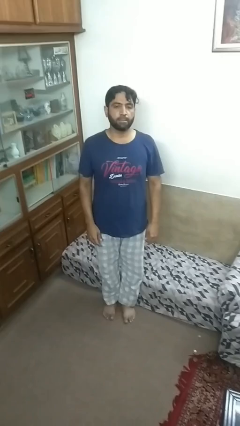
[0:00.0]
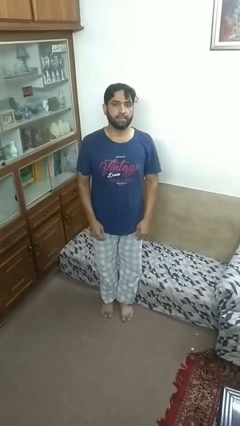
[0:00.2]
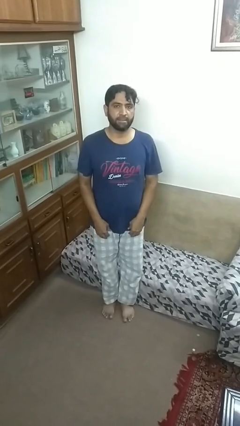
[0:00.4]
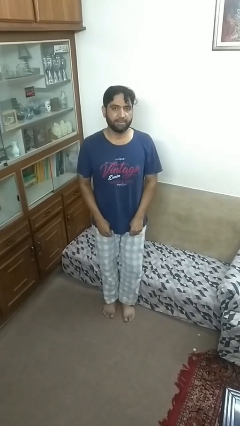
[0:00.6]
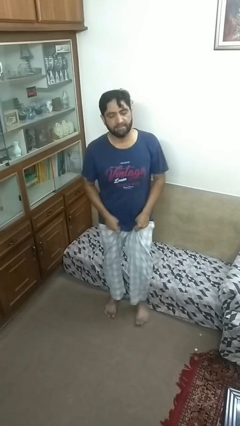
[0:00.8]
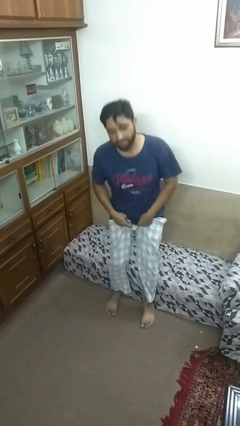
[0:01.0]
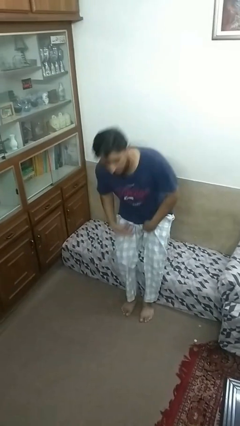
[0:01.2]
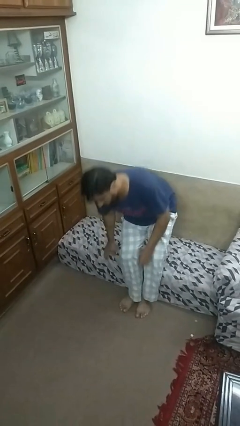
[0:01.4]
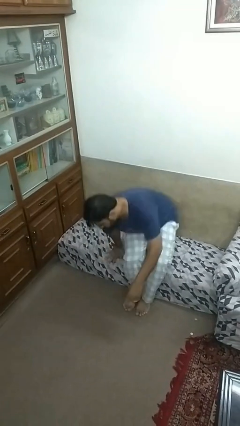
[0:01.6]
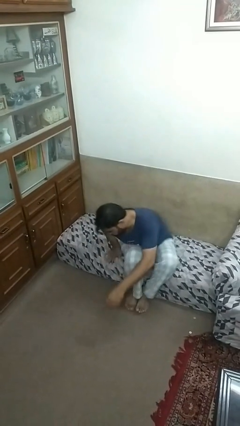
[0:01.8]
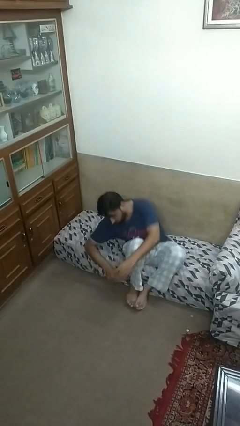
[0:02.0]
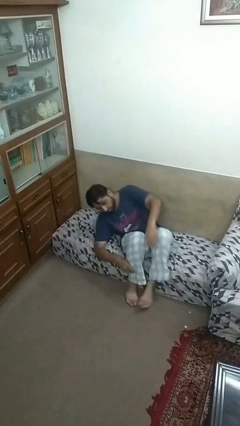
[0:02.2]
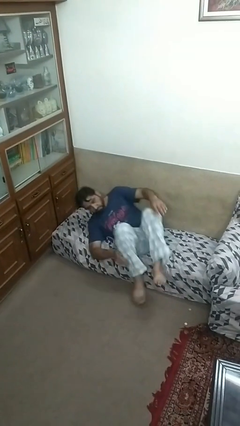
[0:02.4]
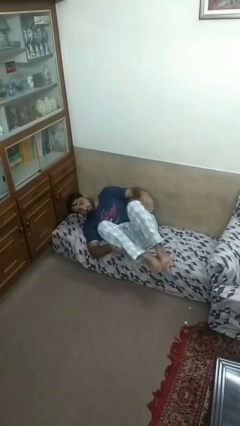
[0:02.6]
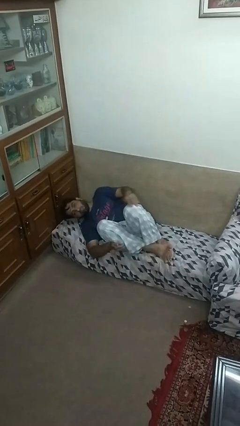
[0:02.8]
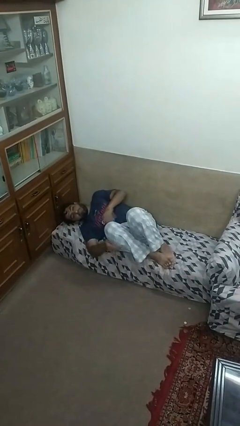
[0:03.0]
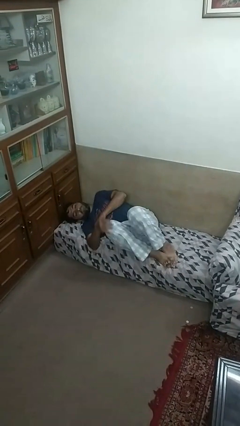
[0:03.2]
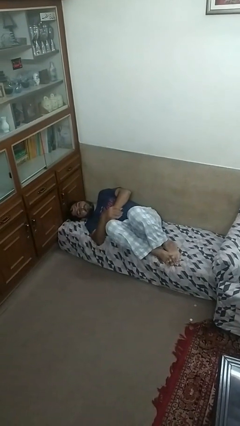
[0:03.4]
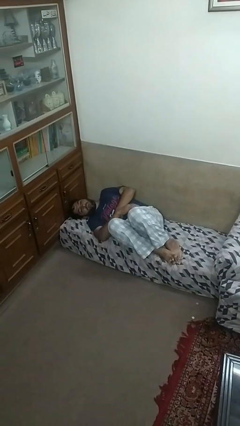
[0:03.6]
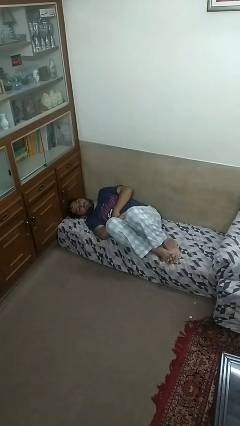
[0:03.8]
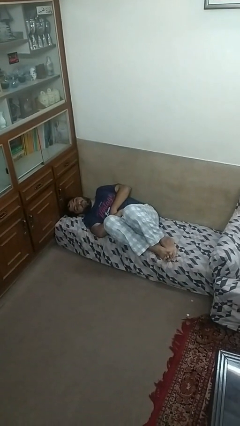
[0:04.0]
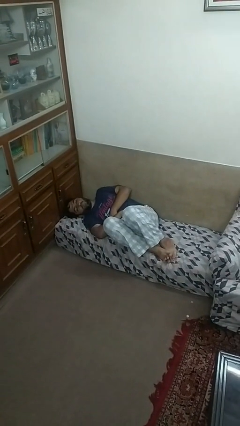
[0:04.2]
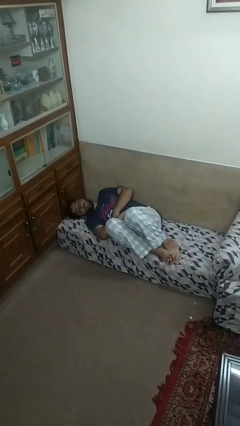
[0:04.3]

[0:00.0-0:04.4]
person lies down on couch

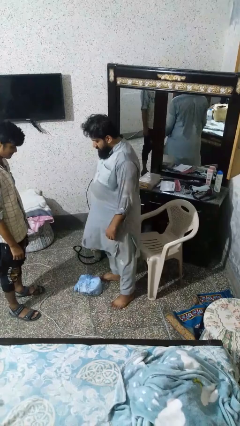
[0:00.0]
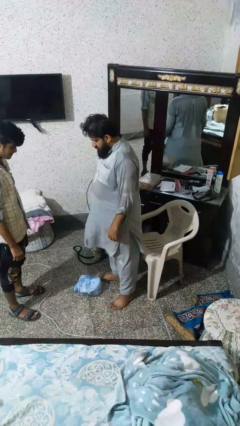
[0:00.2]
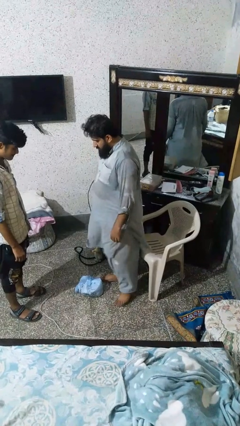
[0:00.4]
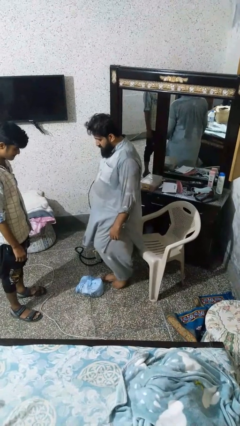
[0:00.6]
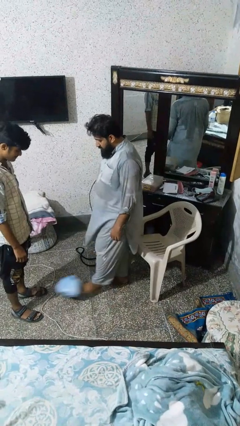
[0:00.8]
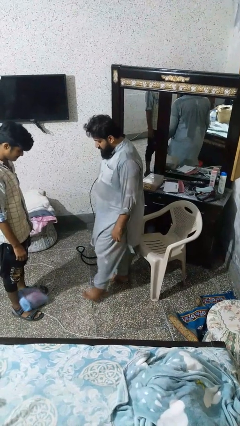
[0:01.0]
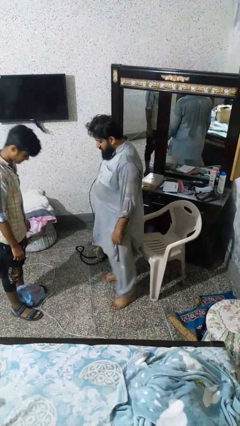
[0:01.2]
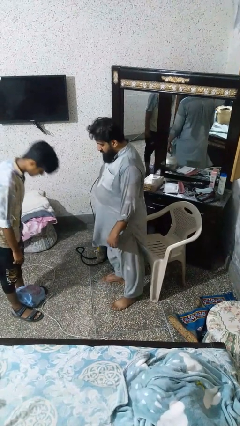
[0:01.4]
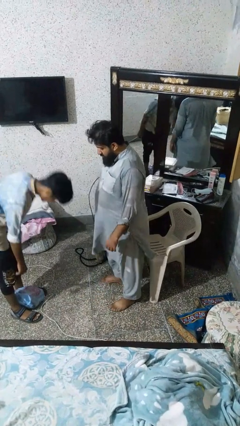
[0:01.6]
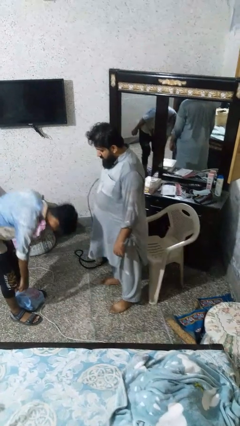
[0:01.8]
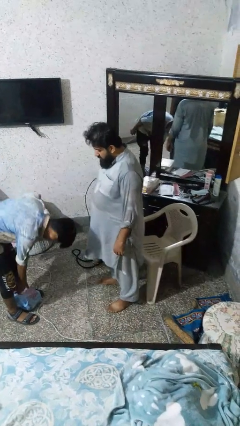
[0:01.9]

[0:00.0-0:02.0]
person kicks object to person

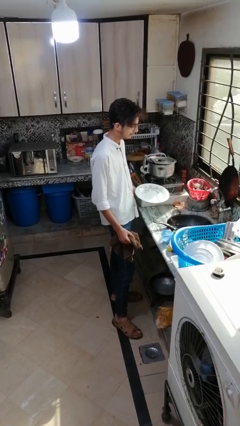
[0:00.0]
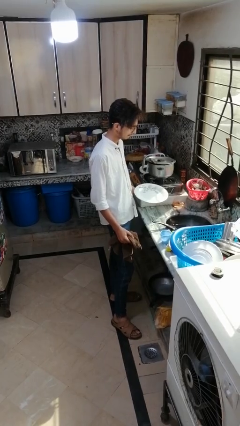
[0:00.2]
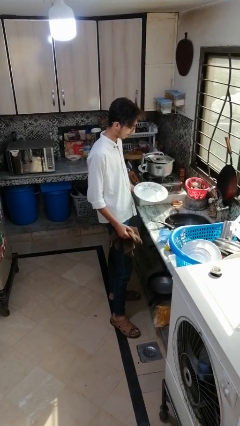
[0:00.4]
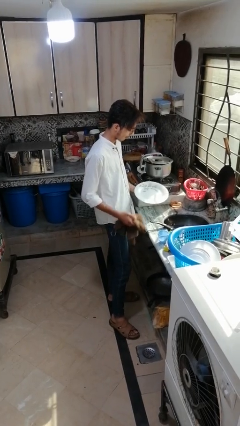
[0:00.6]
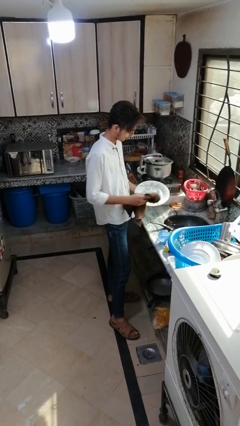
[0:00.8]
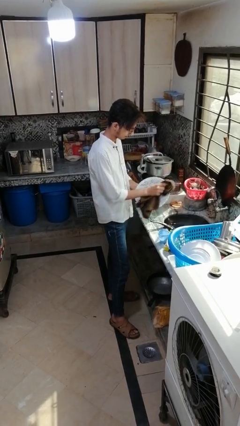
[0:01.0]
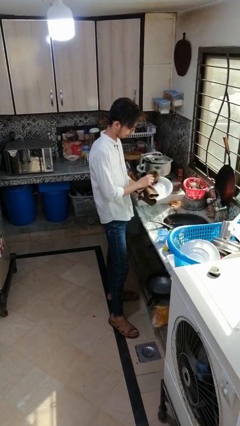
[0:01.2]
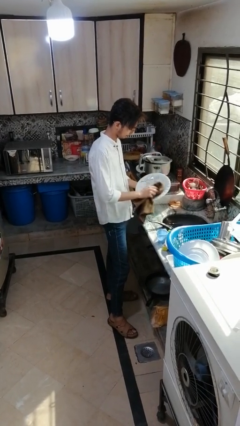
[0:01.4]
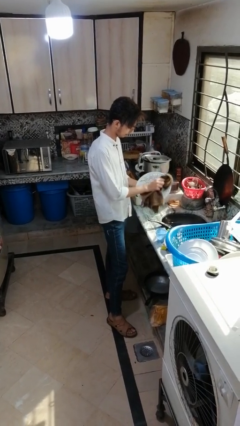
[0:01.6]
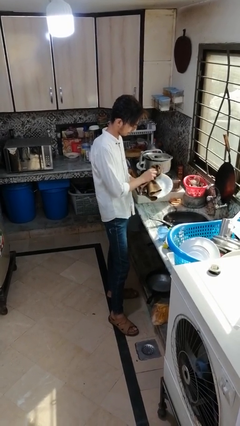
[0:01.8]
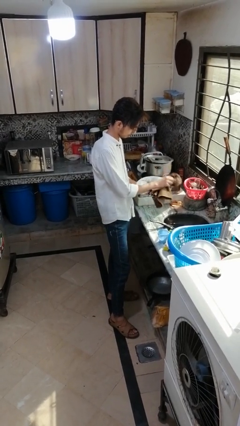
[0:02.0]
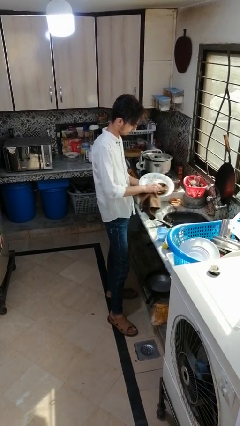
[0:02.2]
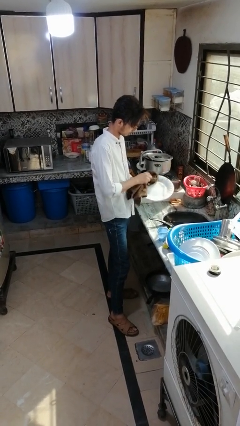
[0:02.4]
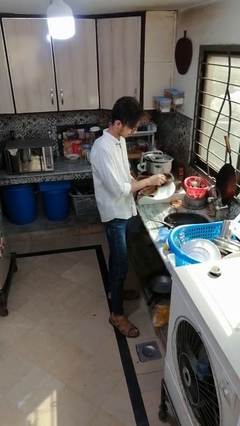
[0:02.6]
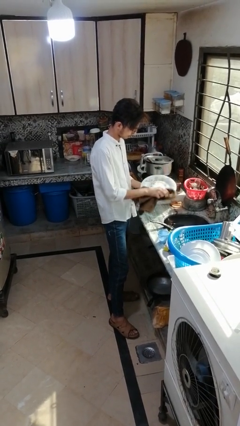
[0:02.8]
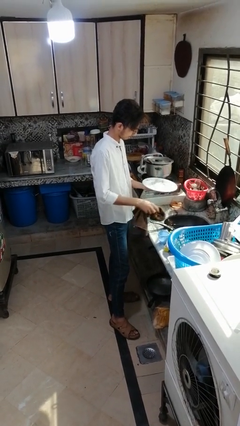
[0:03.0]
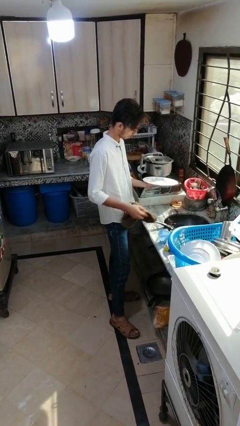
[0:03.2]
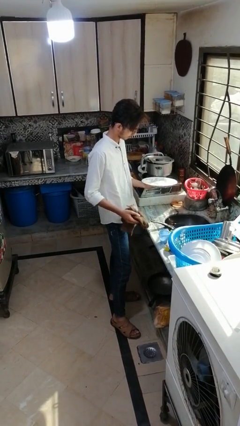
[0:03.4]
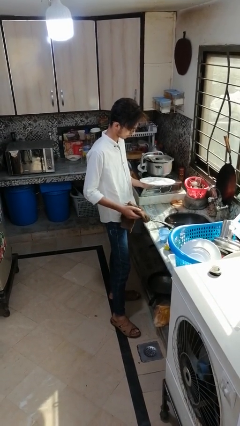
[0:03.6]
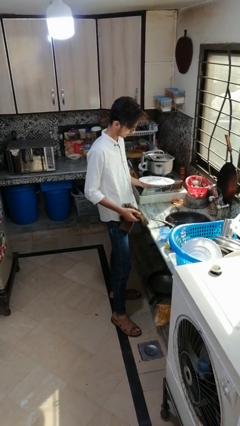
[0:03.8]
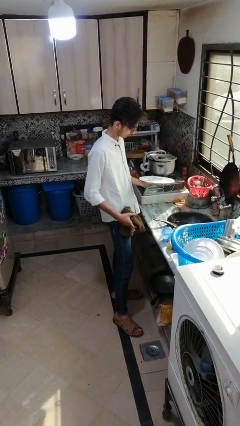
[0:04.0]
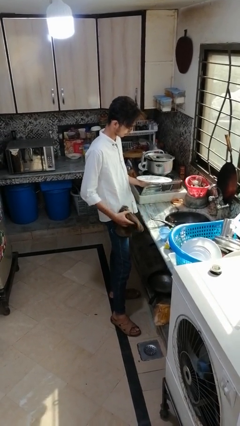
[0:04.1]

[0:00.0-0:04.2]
person dries dish

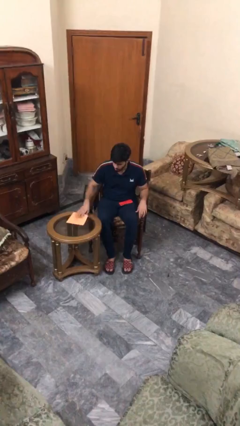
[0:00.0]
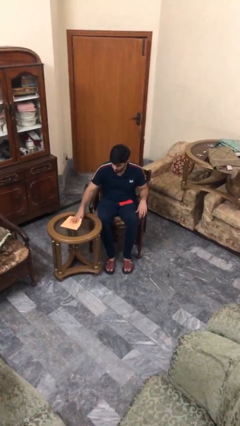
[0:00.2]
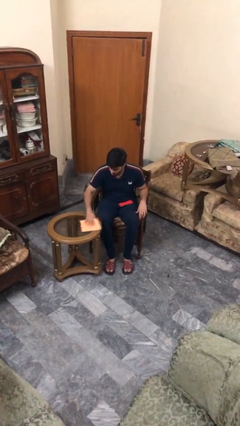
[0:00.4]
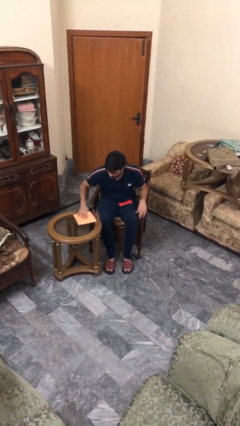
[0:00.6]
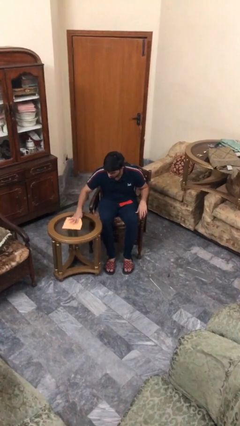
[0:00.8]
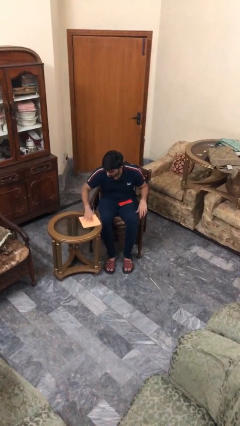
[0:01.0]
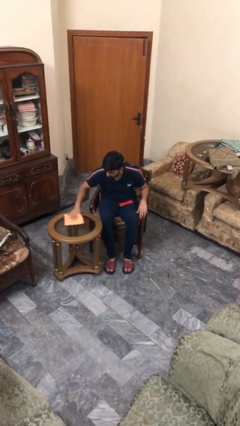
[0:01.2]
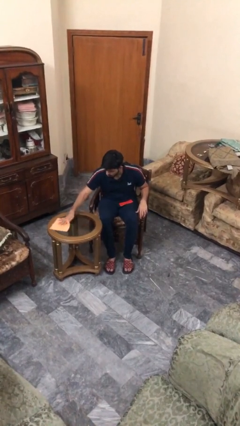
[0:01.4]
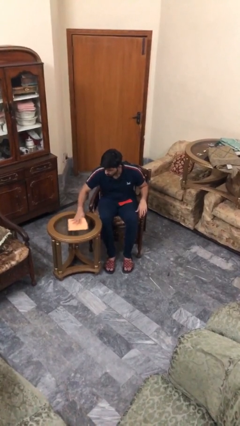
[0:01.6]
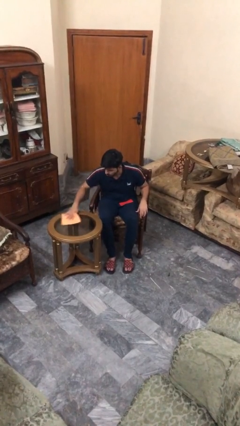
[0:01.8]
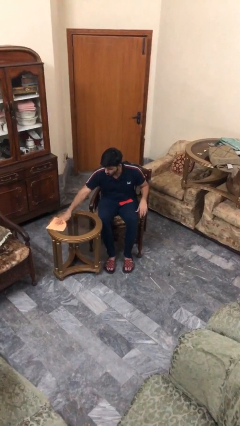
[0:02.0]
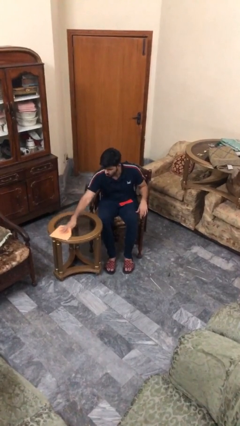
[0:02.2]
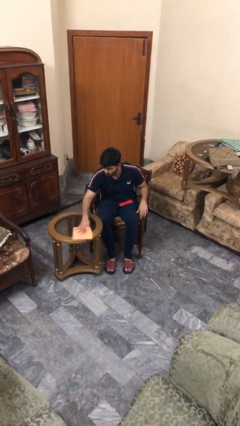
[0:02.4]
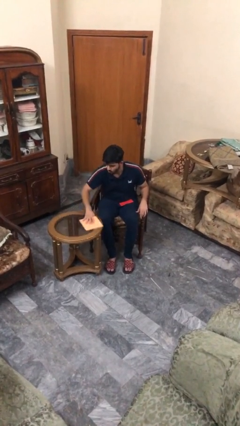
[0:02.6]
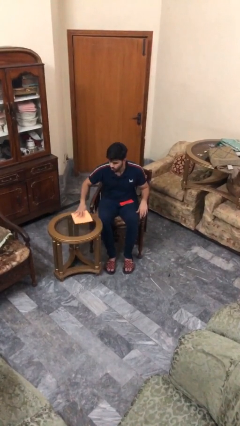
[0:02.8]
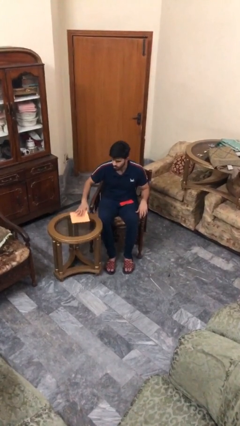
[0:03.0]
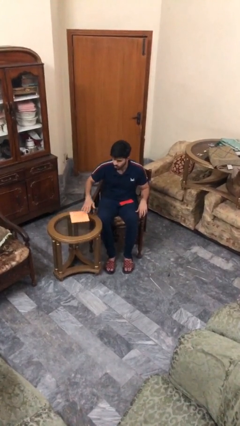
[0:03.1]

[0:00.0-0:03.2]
person cleans table with rag

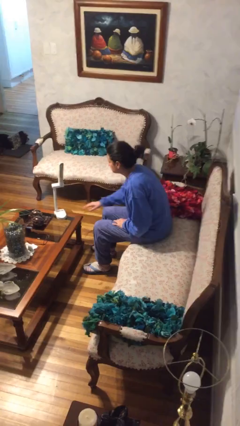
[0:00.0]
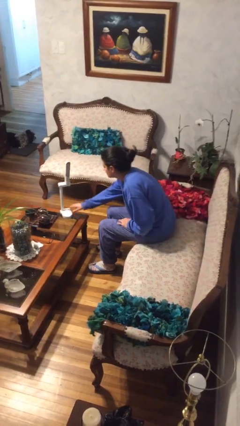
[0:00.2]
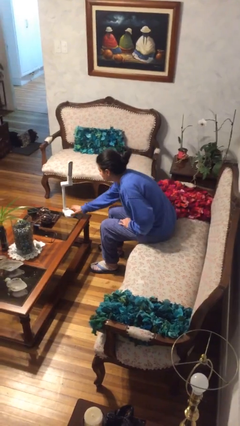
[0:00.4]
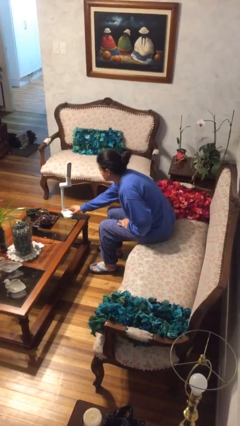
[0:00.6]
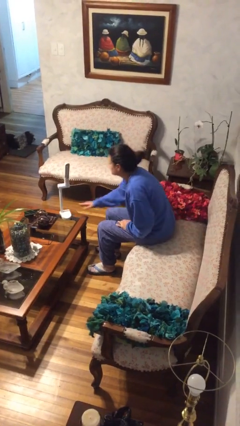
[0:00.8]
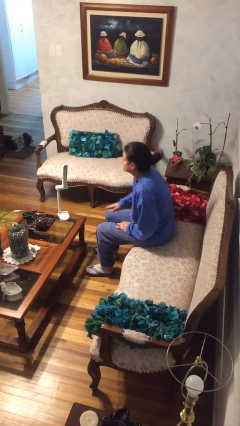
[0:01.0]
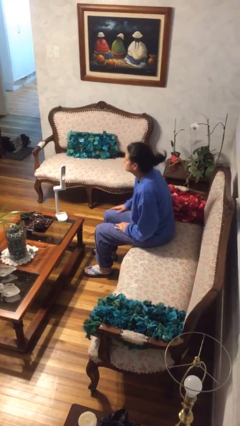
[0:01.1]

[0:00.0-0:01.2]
person turns on lamp

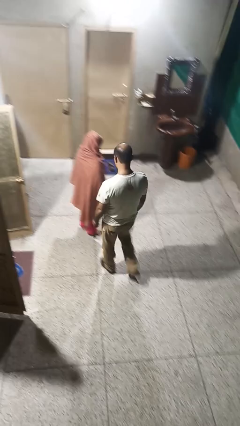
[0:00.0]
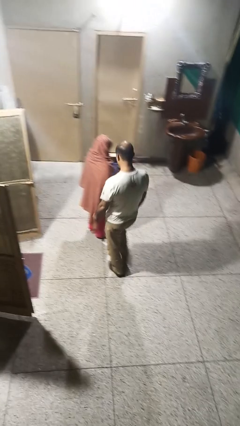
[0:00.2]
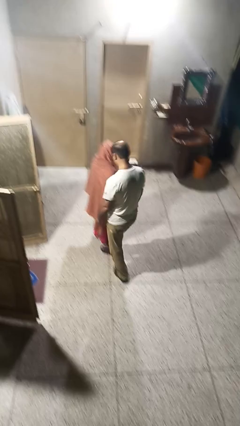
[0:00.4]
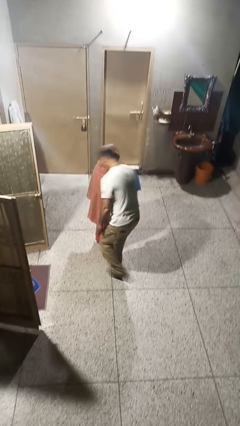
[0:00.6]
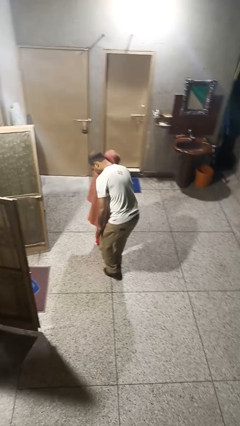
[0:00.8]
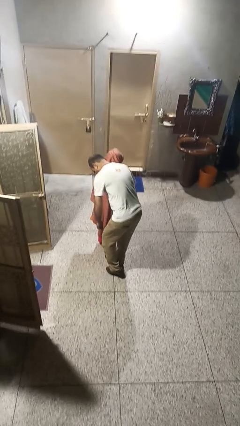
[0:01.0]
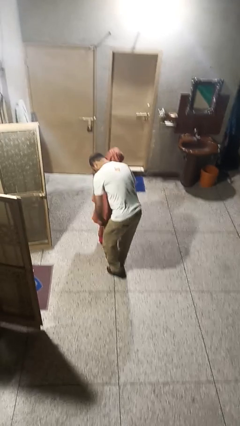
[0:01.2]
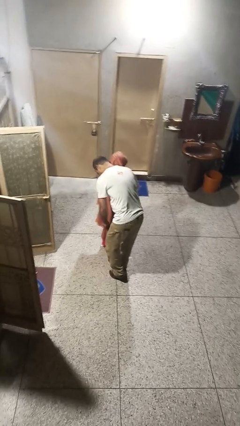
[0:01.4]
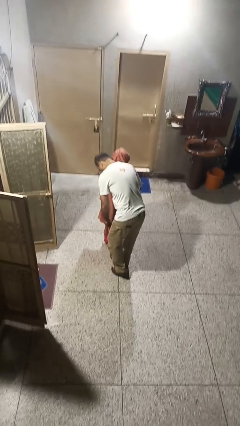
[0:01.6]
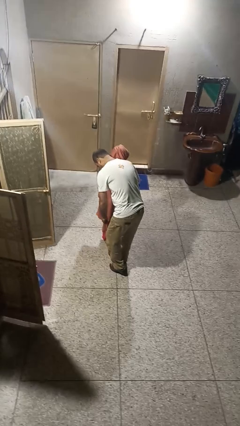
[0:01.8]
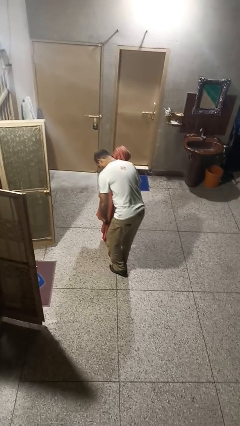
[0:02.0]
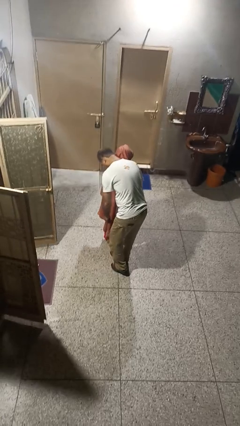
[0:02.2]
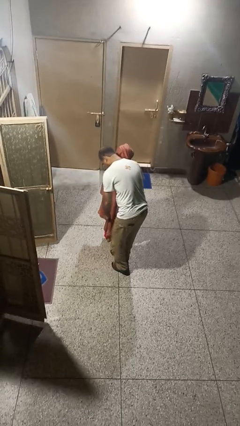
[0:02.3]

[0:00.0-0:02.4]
person bumps into person
